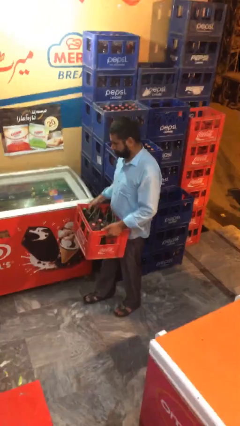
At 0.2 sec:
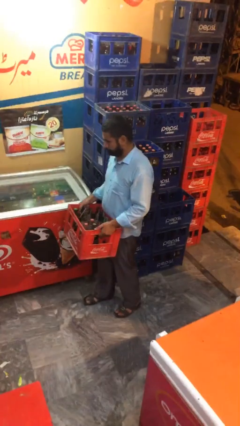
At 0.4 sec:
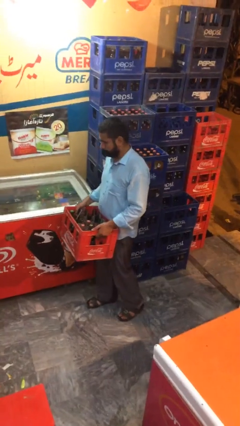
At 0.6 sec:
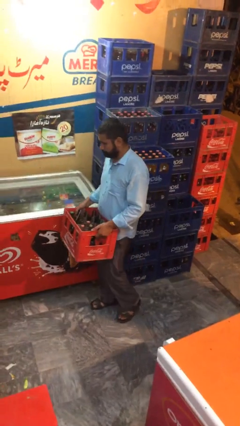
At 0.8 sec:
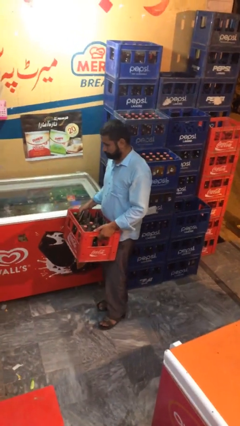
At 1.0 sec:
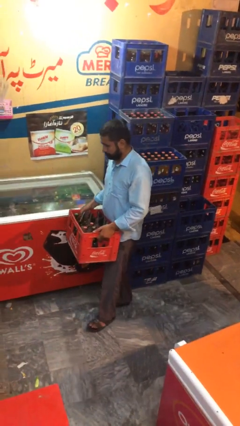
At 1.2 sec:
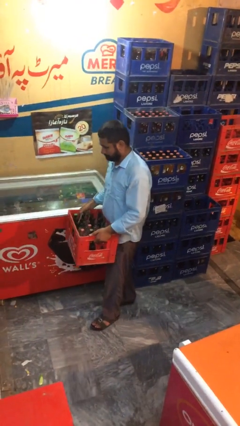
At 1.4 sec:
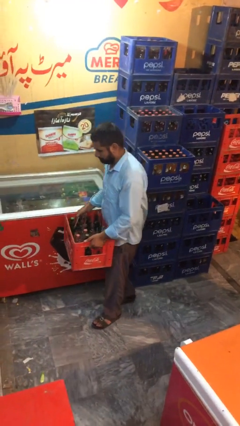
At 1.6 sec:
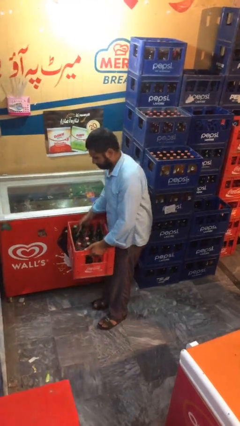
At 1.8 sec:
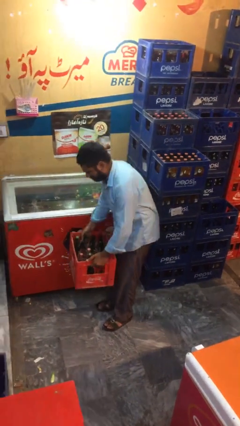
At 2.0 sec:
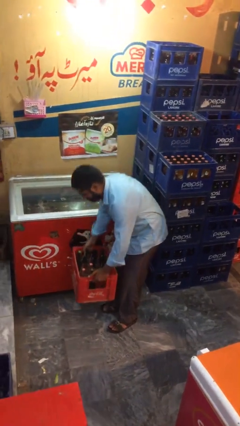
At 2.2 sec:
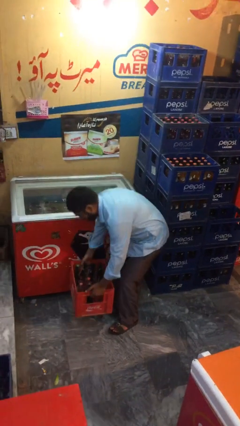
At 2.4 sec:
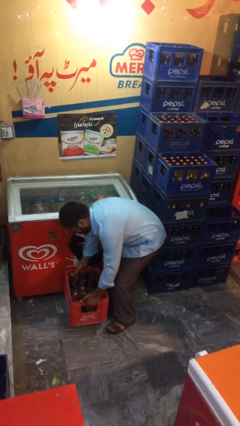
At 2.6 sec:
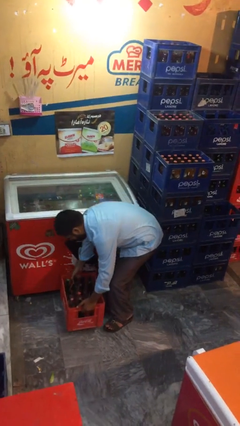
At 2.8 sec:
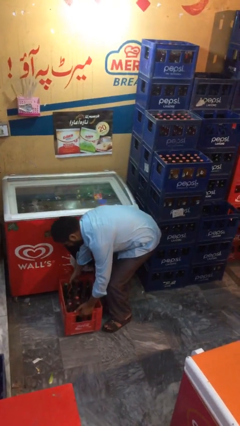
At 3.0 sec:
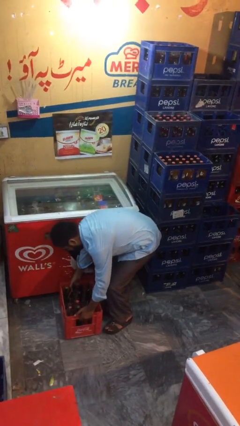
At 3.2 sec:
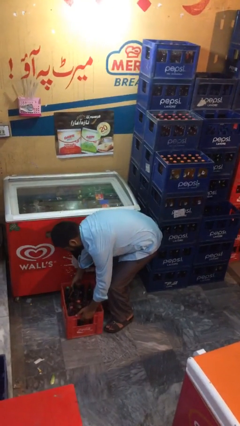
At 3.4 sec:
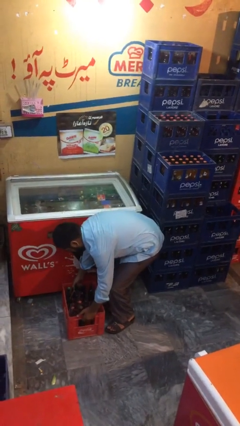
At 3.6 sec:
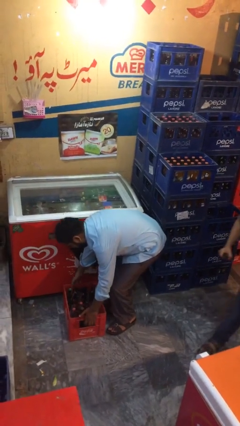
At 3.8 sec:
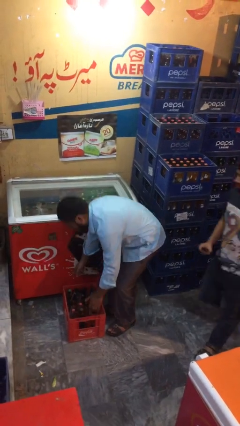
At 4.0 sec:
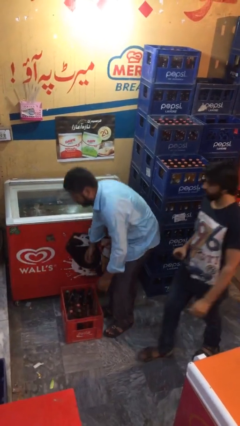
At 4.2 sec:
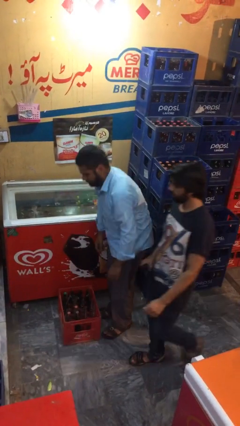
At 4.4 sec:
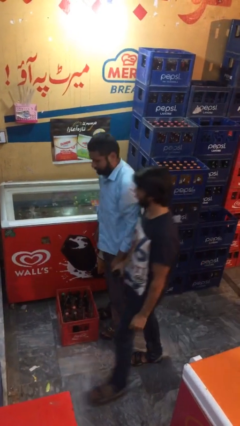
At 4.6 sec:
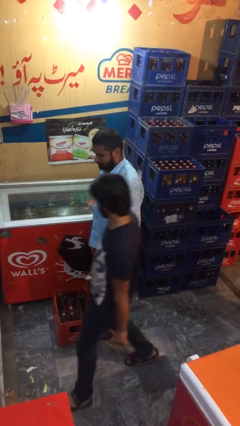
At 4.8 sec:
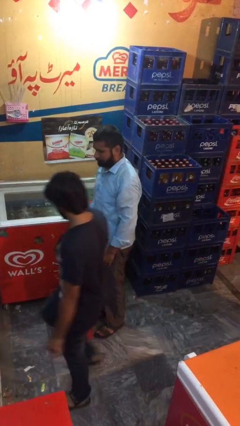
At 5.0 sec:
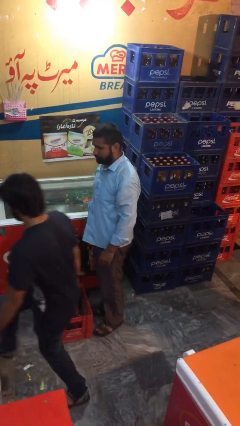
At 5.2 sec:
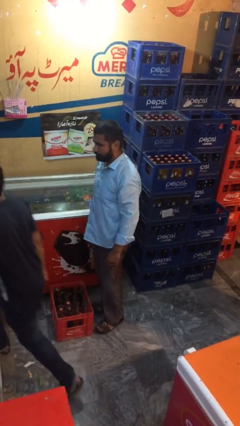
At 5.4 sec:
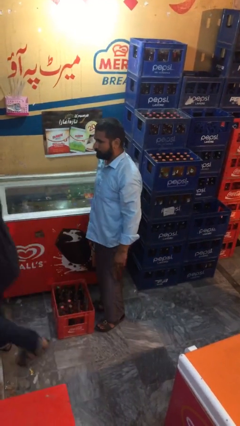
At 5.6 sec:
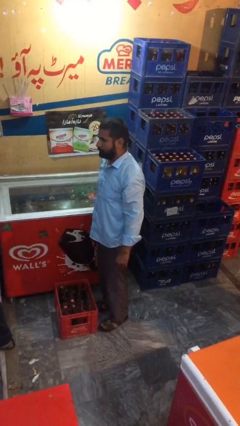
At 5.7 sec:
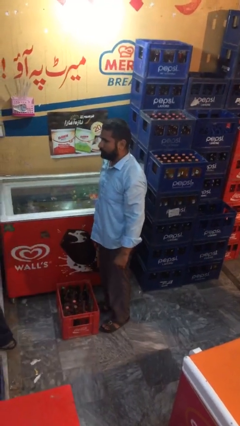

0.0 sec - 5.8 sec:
person puts down object on floor

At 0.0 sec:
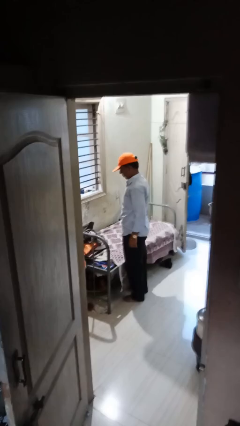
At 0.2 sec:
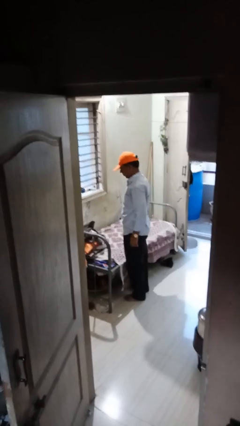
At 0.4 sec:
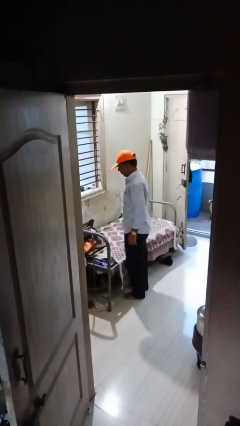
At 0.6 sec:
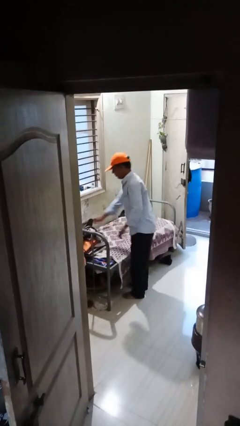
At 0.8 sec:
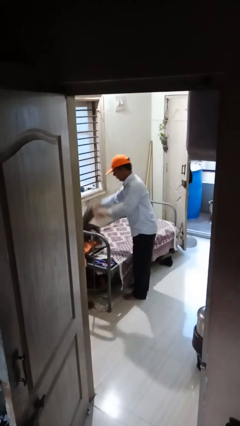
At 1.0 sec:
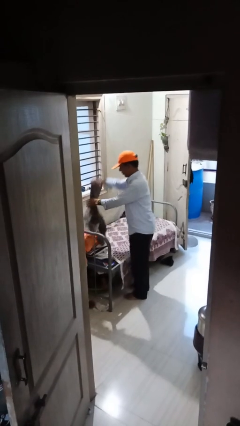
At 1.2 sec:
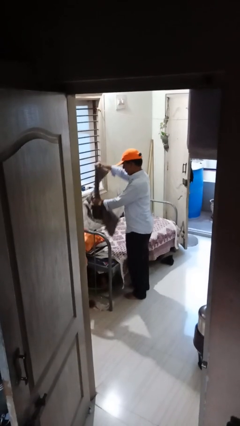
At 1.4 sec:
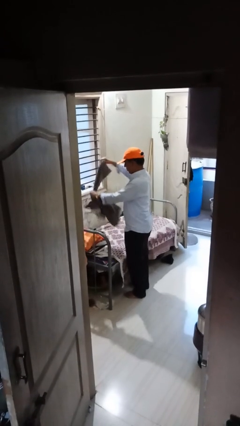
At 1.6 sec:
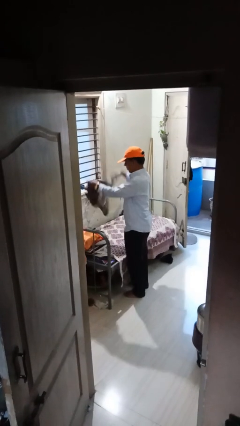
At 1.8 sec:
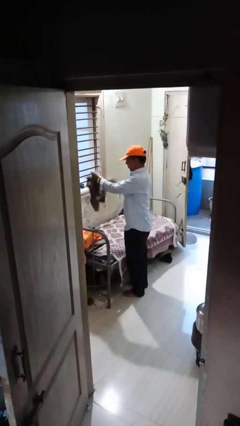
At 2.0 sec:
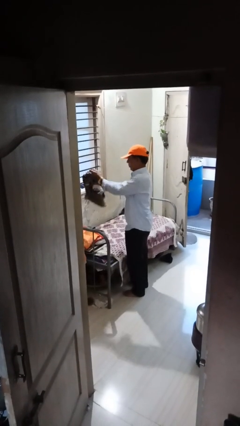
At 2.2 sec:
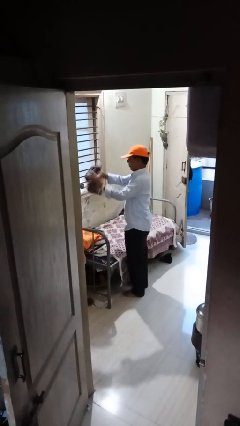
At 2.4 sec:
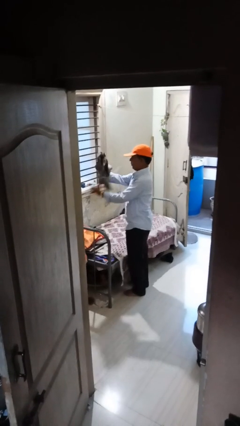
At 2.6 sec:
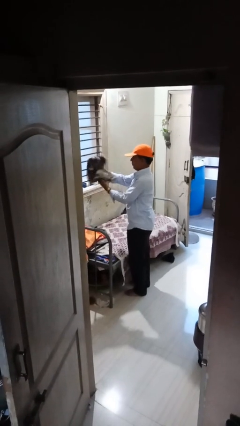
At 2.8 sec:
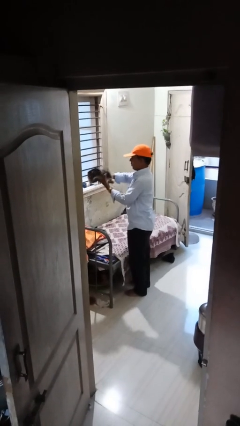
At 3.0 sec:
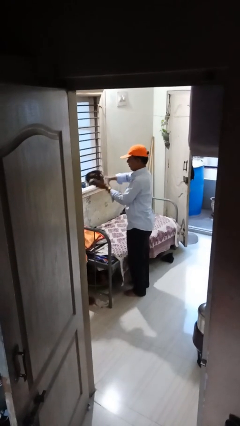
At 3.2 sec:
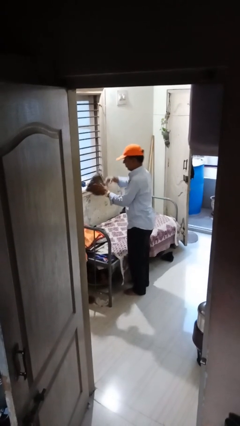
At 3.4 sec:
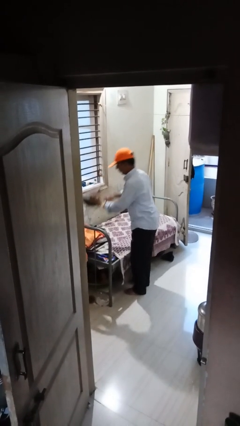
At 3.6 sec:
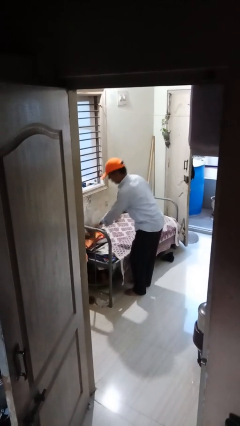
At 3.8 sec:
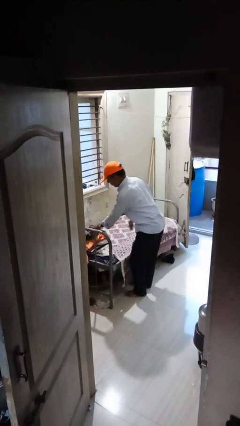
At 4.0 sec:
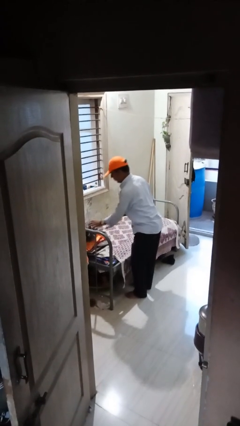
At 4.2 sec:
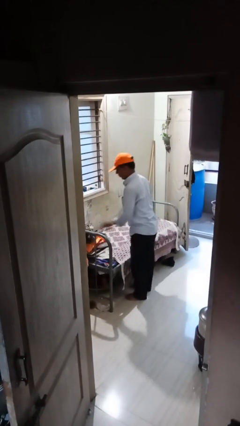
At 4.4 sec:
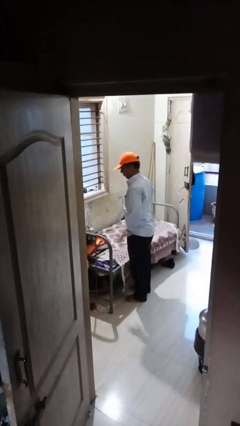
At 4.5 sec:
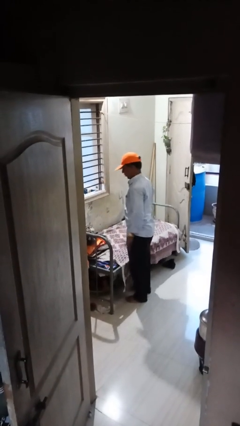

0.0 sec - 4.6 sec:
person folds pants

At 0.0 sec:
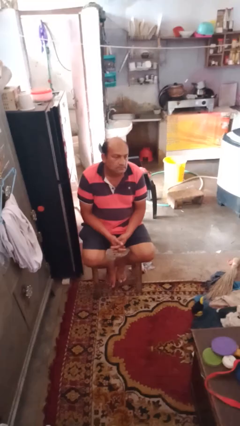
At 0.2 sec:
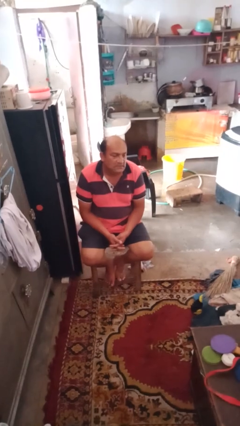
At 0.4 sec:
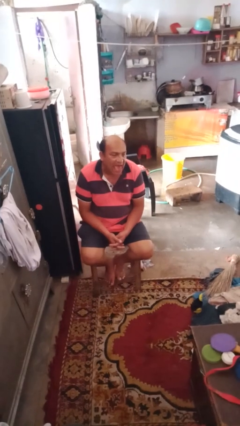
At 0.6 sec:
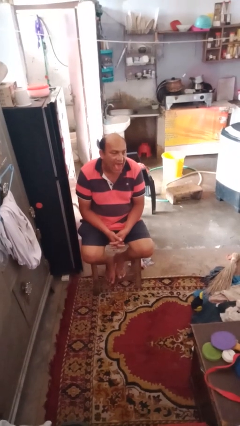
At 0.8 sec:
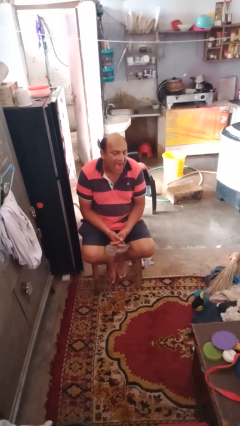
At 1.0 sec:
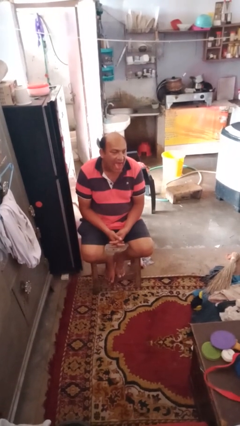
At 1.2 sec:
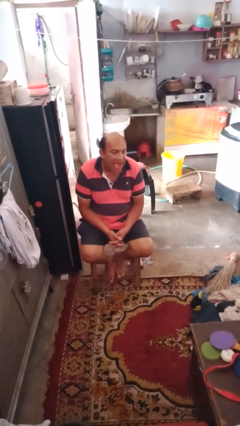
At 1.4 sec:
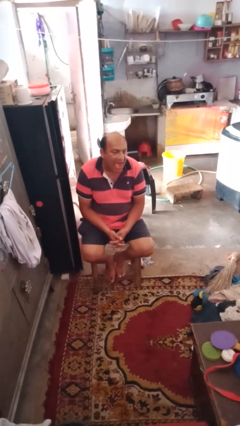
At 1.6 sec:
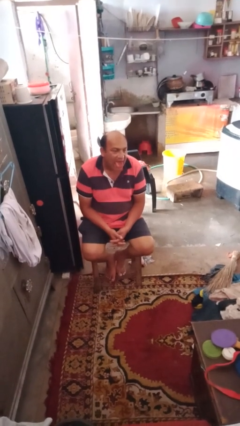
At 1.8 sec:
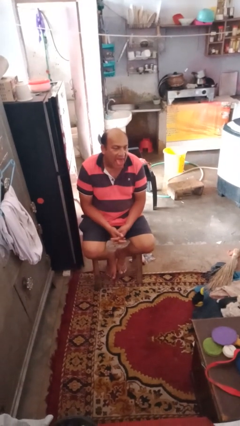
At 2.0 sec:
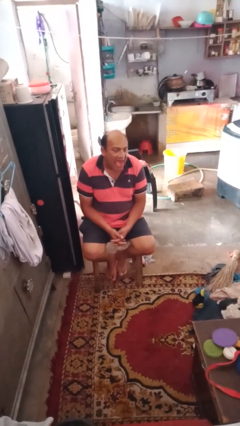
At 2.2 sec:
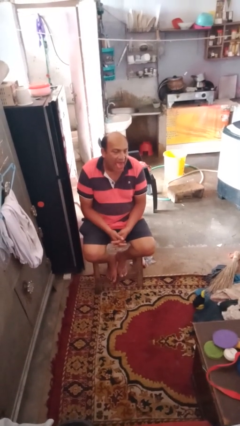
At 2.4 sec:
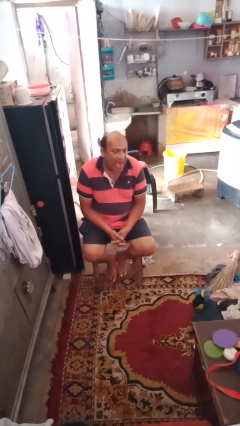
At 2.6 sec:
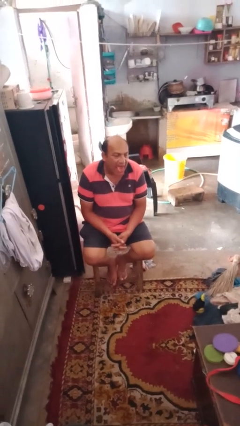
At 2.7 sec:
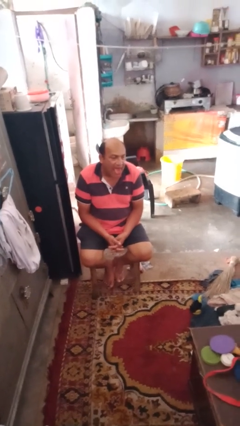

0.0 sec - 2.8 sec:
person sticks out tongue

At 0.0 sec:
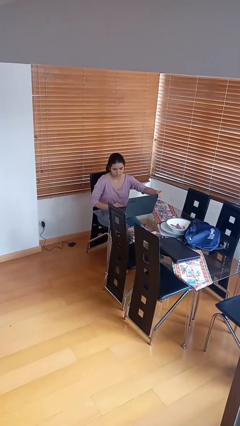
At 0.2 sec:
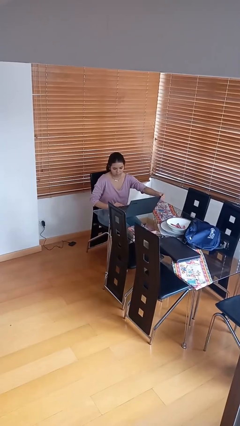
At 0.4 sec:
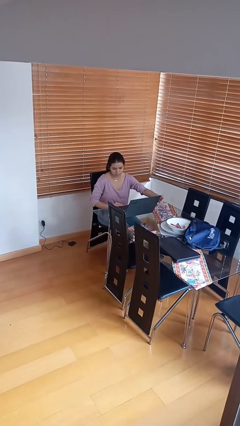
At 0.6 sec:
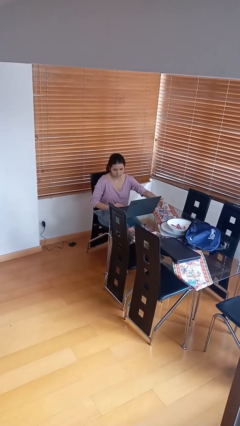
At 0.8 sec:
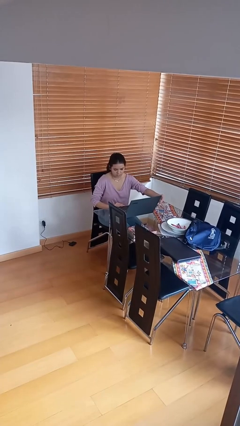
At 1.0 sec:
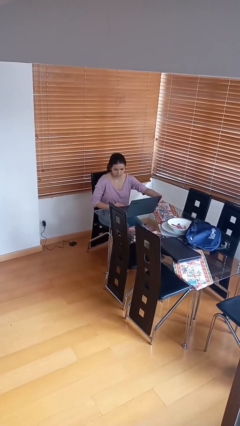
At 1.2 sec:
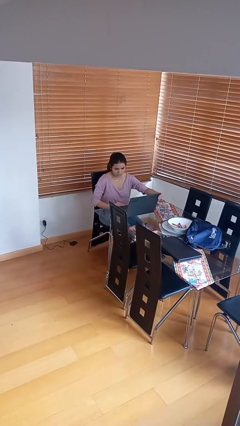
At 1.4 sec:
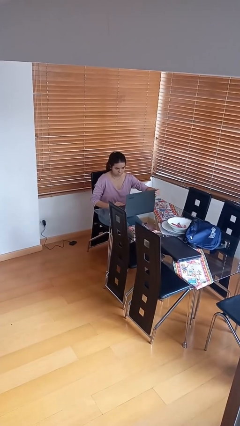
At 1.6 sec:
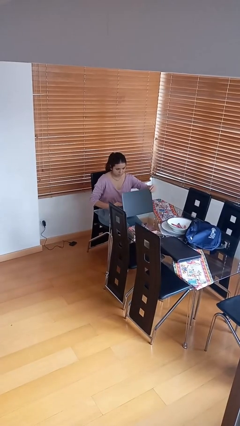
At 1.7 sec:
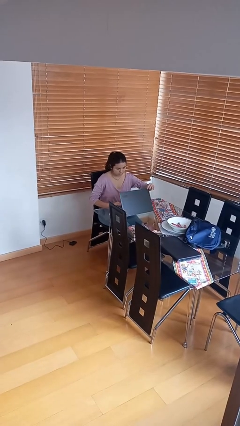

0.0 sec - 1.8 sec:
person interacts with laptop

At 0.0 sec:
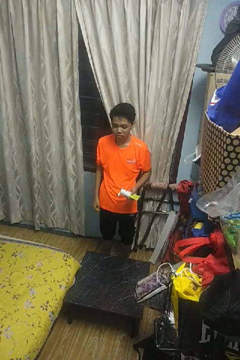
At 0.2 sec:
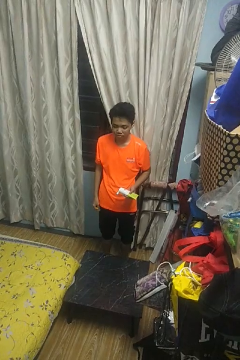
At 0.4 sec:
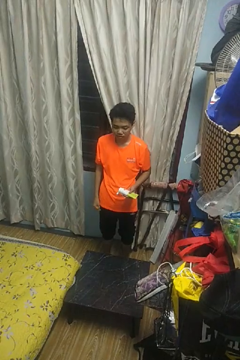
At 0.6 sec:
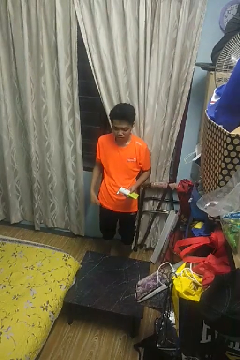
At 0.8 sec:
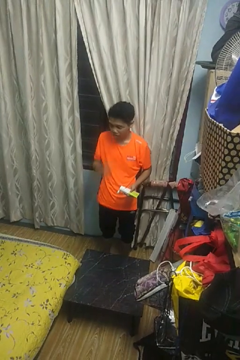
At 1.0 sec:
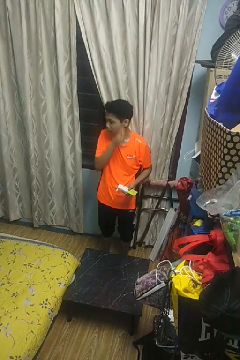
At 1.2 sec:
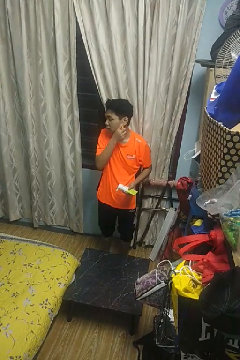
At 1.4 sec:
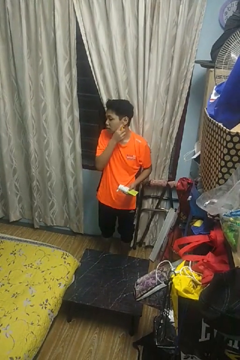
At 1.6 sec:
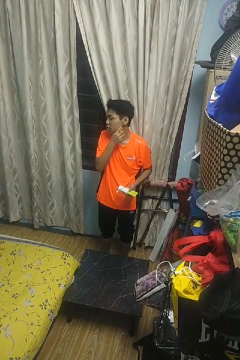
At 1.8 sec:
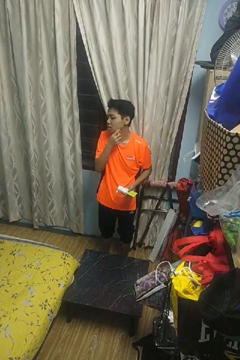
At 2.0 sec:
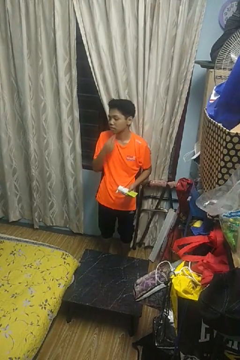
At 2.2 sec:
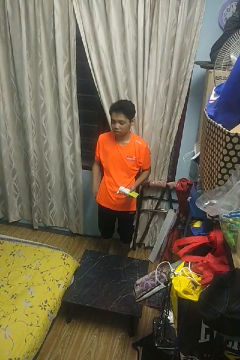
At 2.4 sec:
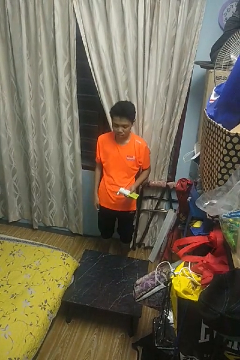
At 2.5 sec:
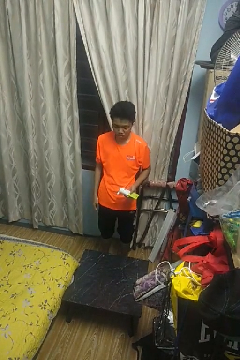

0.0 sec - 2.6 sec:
person shaves face

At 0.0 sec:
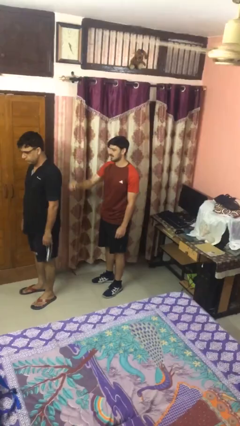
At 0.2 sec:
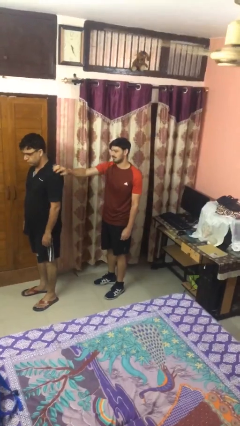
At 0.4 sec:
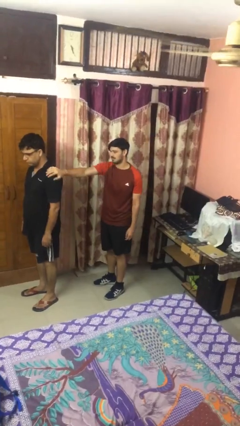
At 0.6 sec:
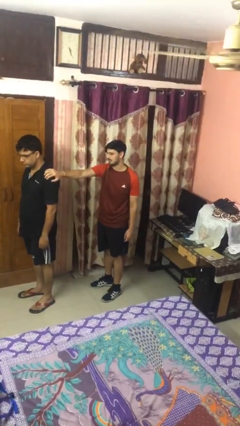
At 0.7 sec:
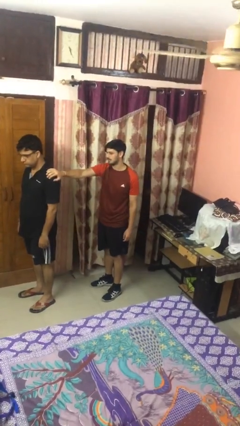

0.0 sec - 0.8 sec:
person grabs person by shoulder
